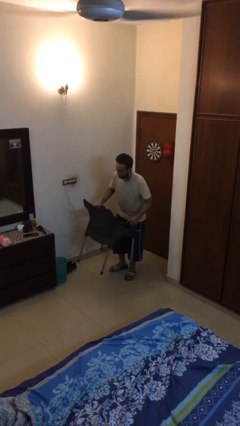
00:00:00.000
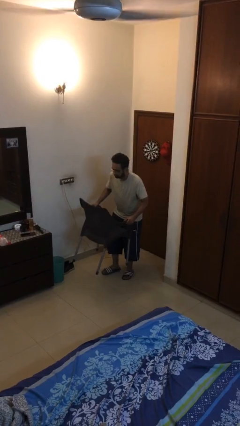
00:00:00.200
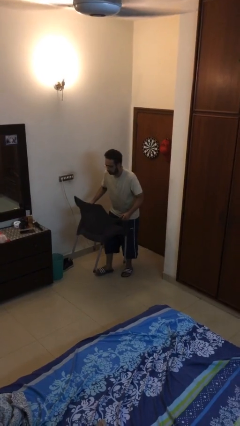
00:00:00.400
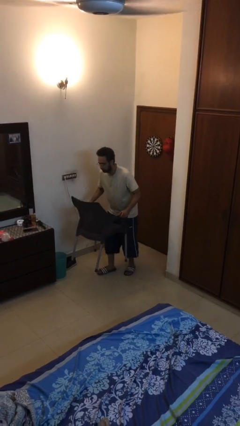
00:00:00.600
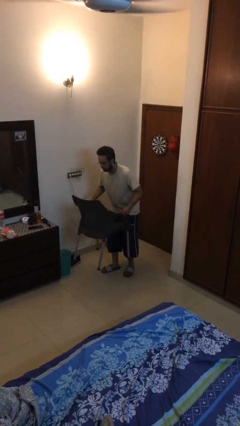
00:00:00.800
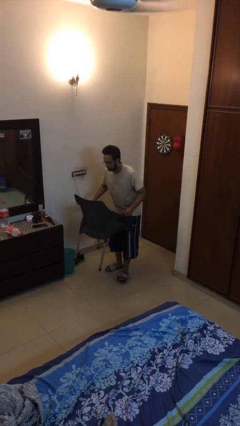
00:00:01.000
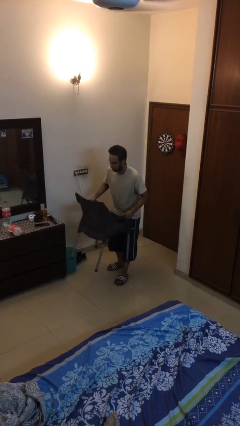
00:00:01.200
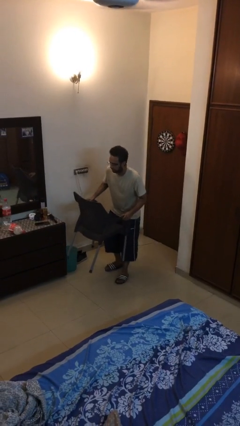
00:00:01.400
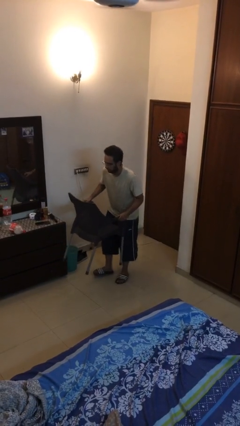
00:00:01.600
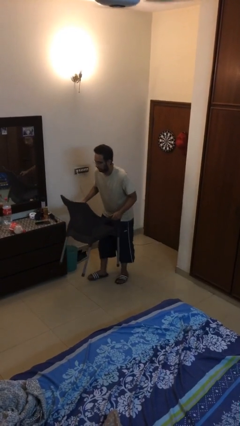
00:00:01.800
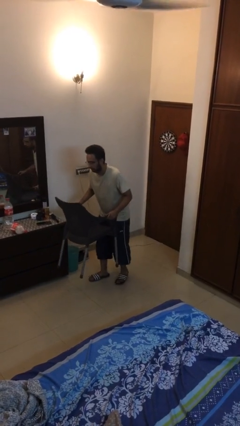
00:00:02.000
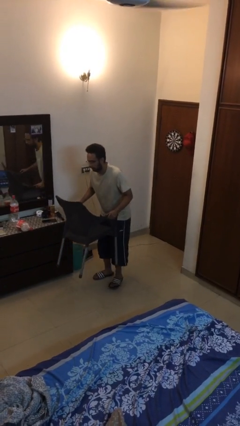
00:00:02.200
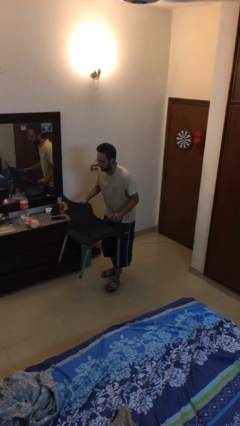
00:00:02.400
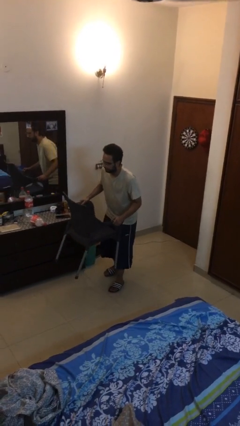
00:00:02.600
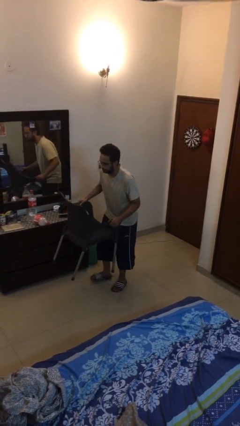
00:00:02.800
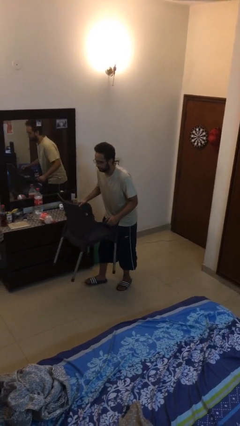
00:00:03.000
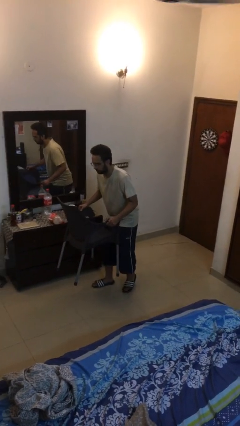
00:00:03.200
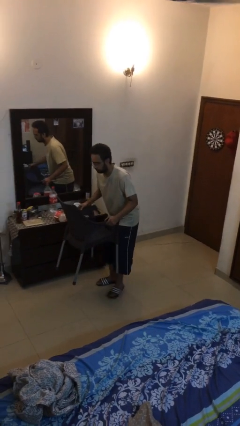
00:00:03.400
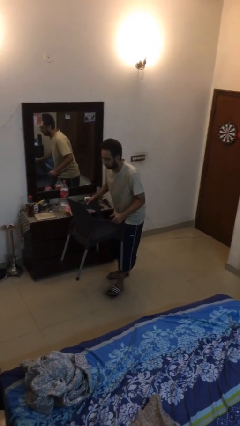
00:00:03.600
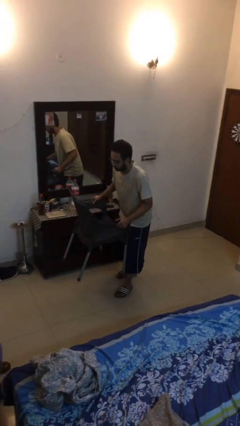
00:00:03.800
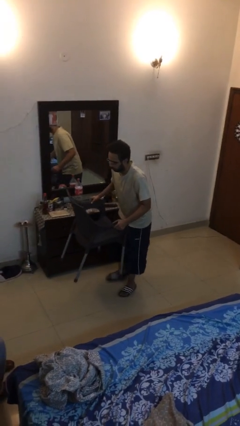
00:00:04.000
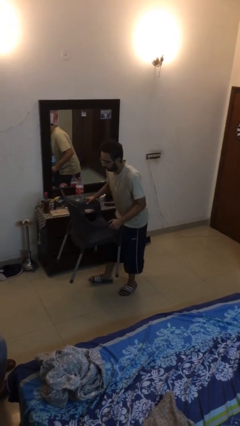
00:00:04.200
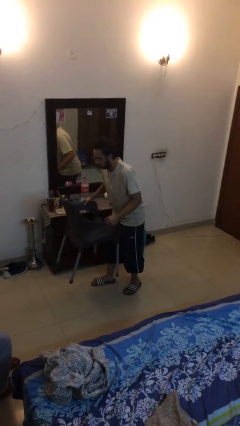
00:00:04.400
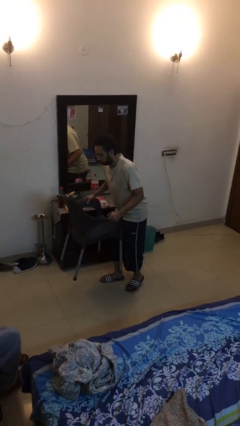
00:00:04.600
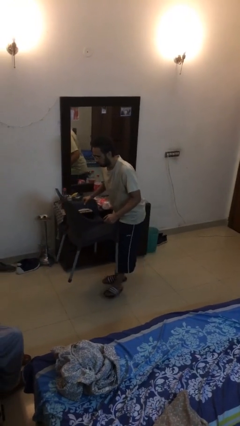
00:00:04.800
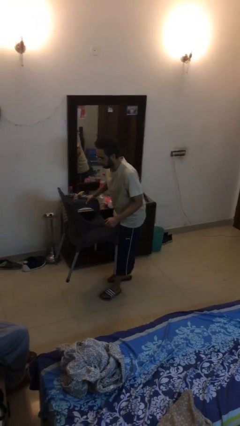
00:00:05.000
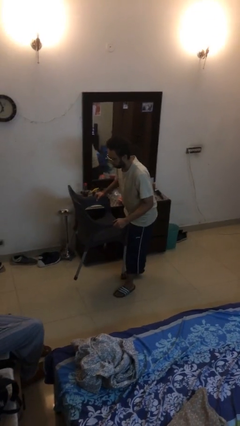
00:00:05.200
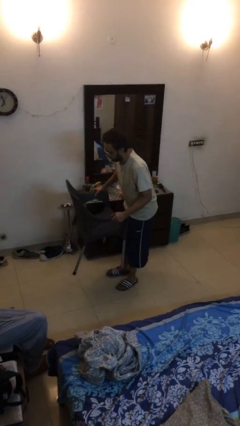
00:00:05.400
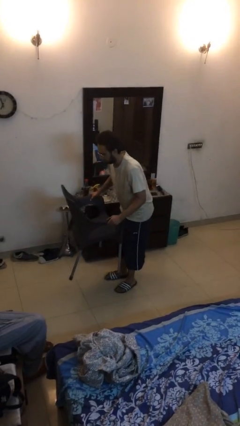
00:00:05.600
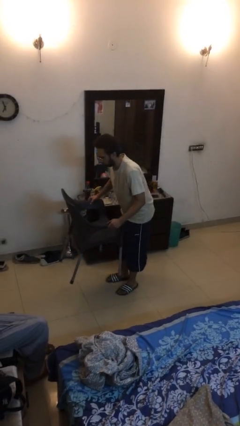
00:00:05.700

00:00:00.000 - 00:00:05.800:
person carries heavy object

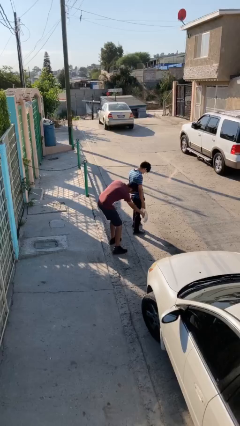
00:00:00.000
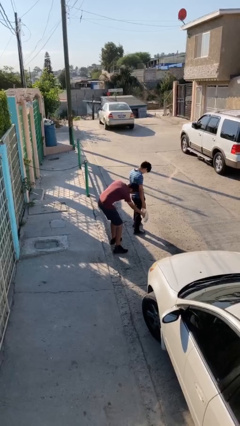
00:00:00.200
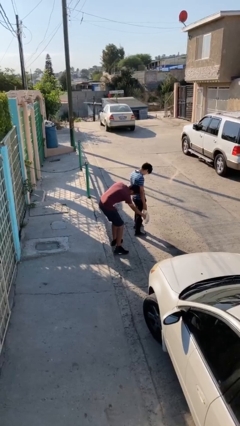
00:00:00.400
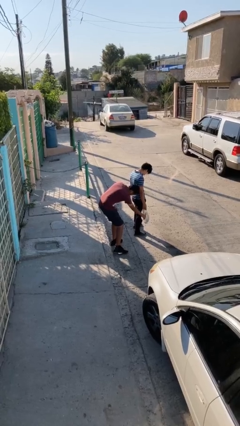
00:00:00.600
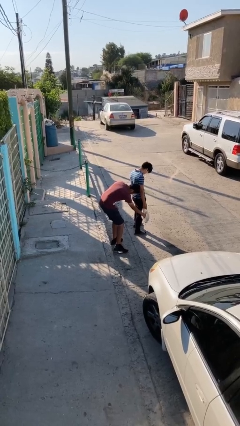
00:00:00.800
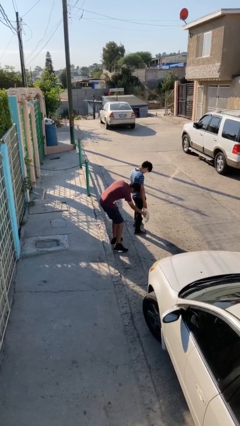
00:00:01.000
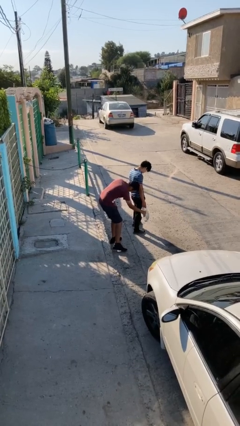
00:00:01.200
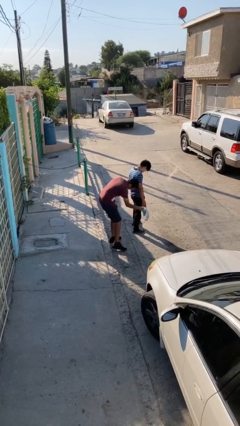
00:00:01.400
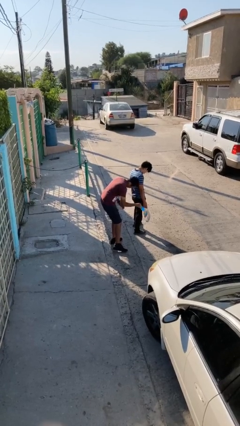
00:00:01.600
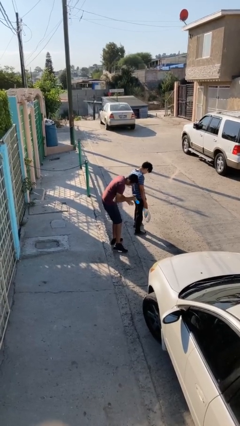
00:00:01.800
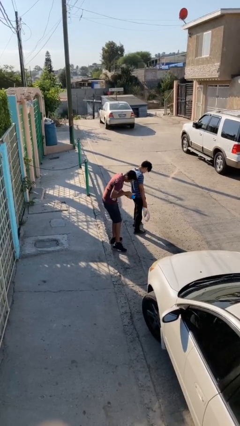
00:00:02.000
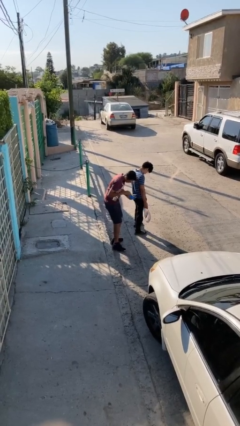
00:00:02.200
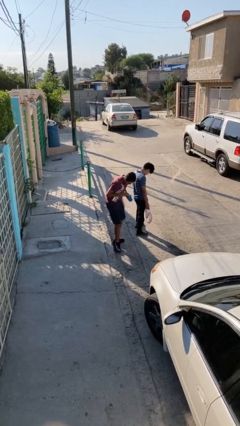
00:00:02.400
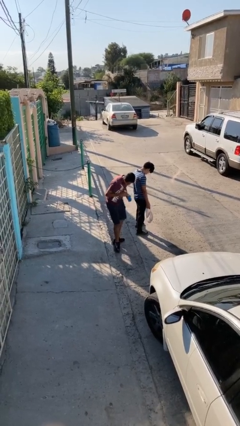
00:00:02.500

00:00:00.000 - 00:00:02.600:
person steals object from person

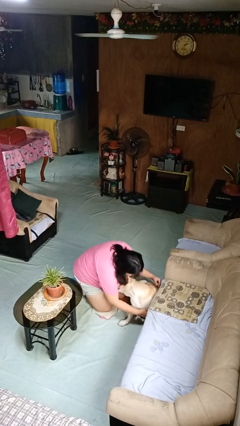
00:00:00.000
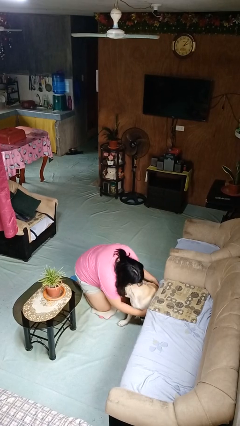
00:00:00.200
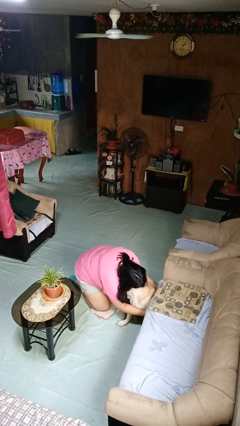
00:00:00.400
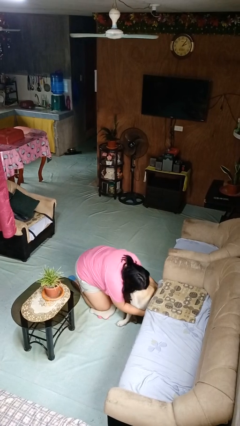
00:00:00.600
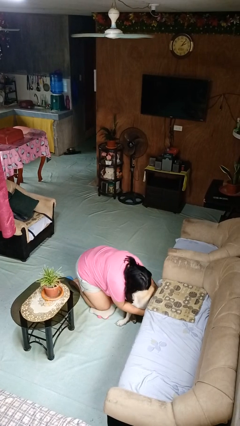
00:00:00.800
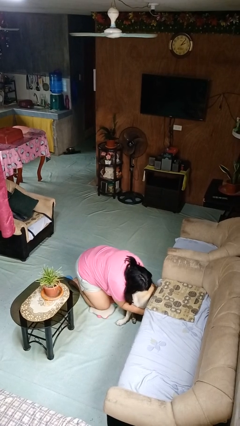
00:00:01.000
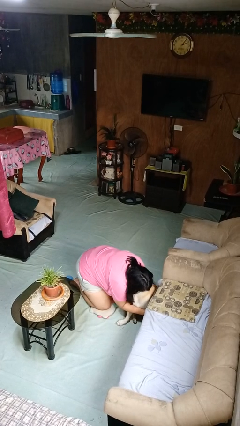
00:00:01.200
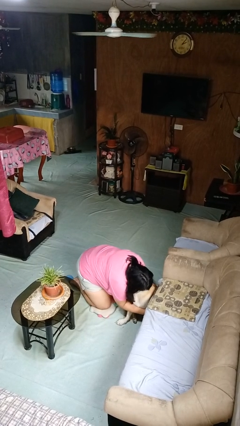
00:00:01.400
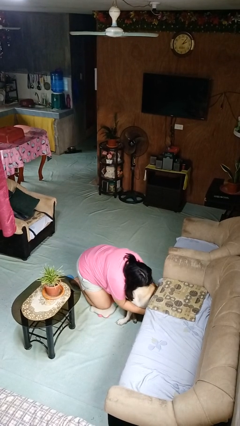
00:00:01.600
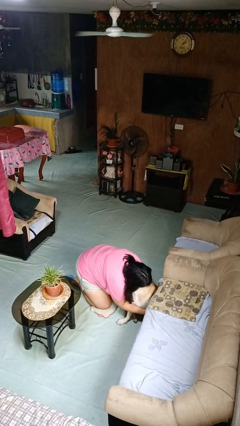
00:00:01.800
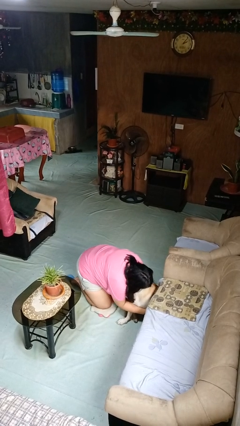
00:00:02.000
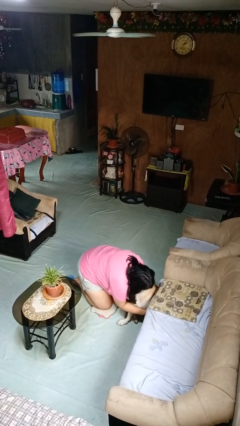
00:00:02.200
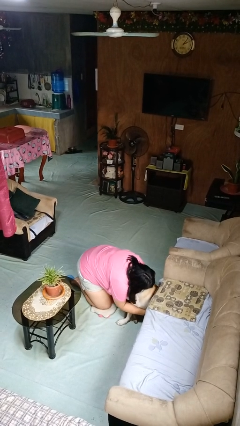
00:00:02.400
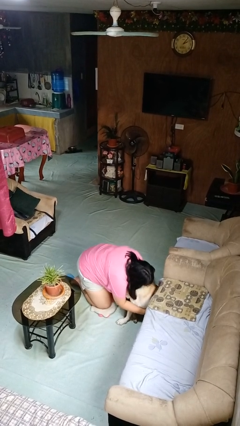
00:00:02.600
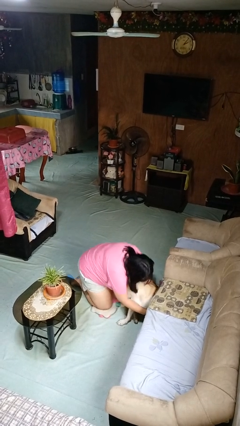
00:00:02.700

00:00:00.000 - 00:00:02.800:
person hugs dog

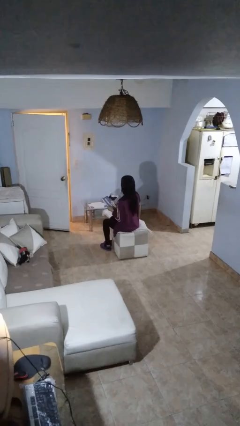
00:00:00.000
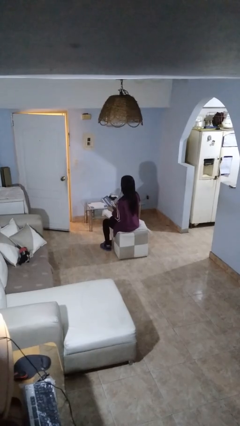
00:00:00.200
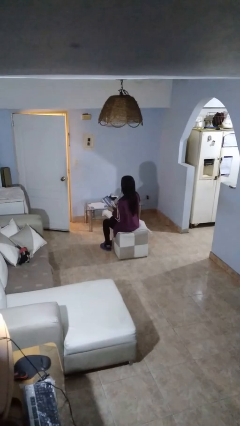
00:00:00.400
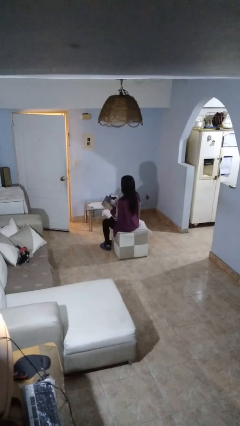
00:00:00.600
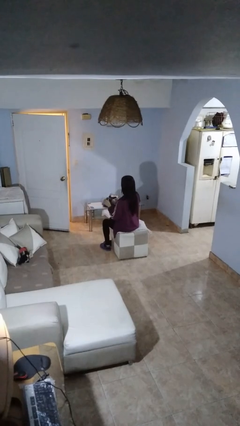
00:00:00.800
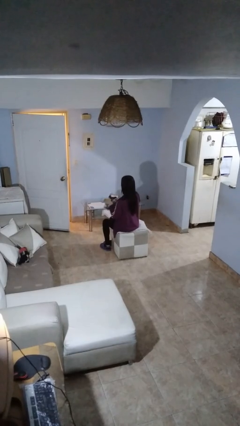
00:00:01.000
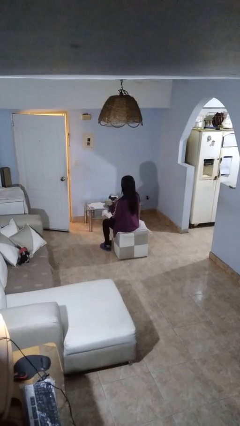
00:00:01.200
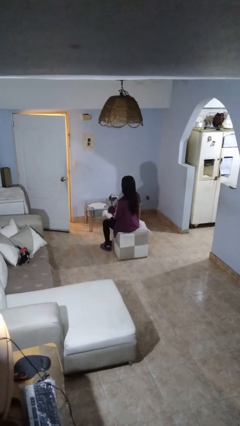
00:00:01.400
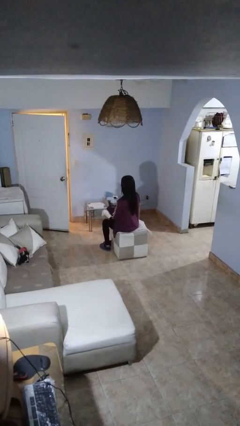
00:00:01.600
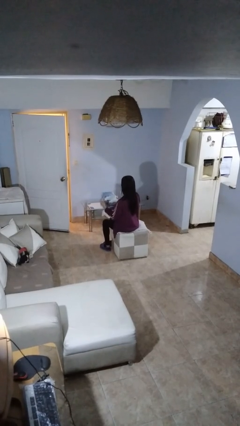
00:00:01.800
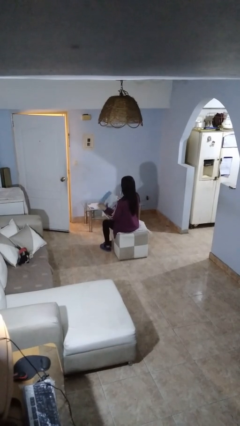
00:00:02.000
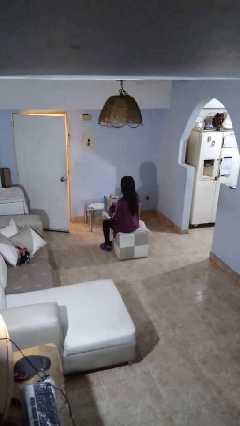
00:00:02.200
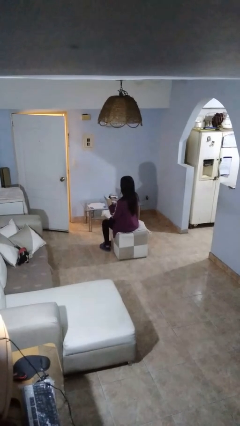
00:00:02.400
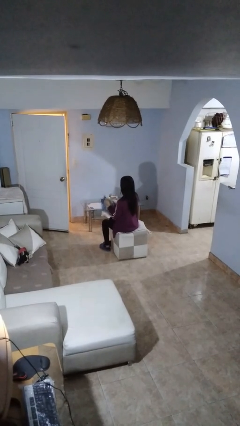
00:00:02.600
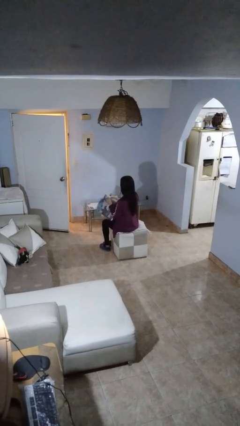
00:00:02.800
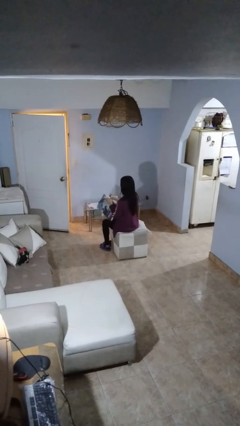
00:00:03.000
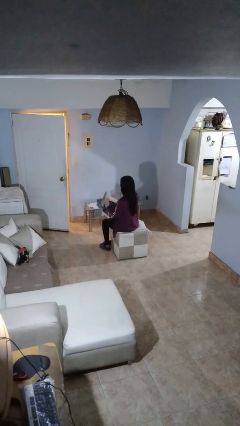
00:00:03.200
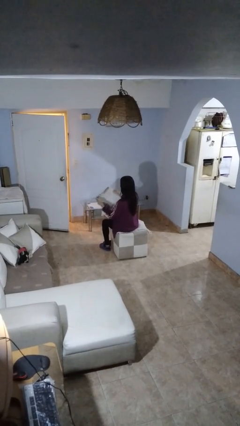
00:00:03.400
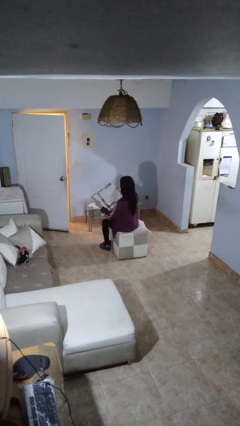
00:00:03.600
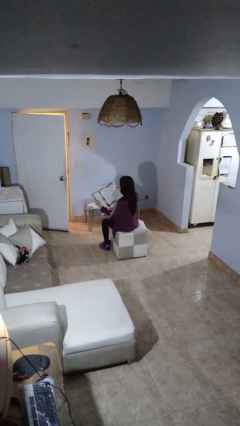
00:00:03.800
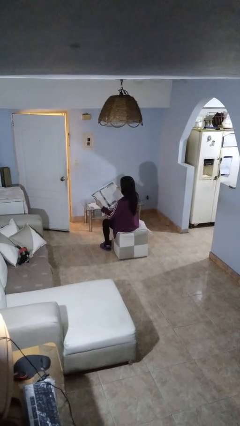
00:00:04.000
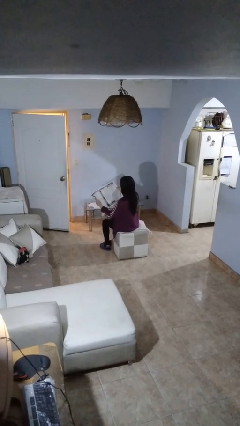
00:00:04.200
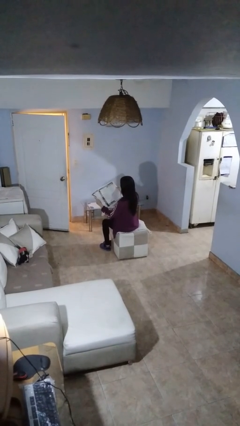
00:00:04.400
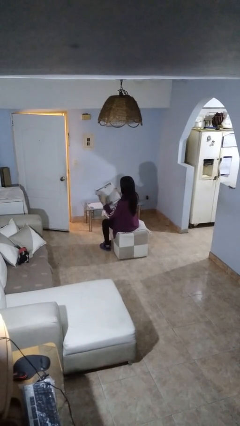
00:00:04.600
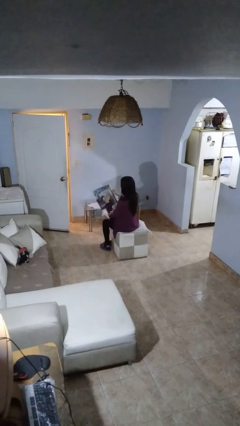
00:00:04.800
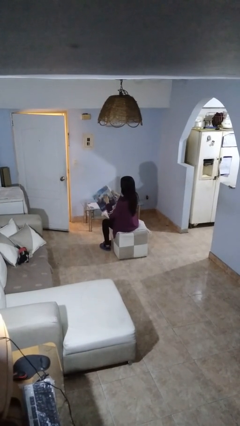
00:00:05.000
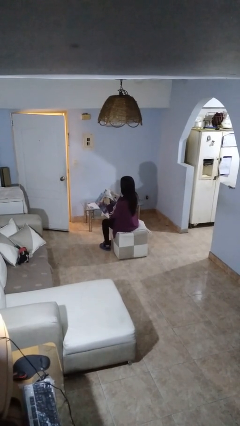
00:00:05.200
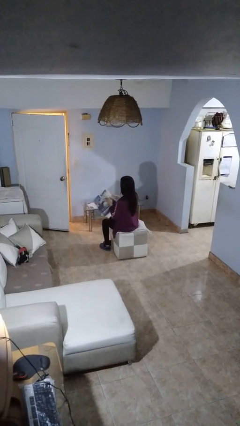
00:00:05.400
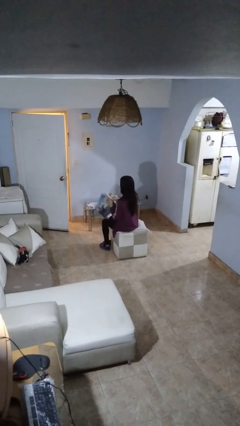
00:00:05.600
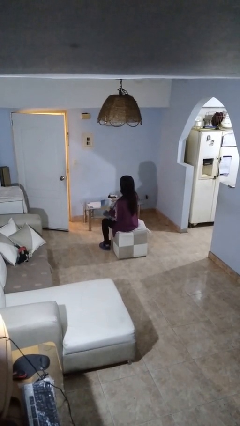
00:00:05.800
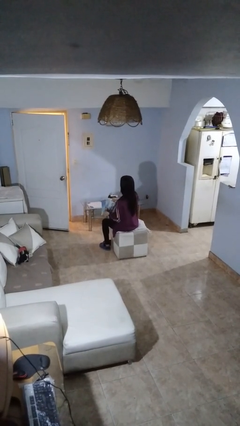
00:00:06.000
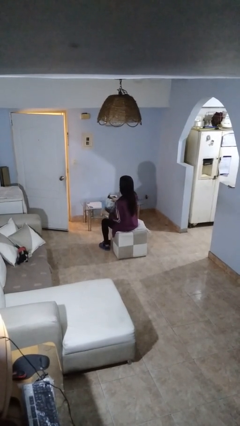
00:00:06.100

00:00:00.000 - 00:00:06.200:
person reads newspaper

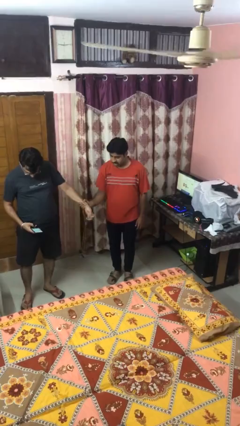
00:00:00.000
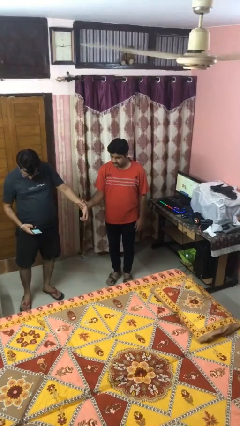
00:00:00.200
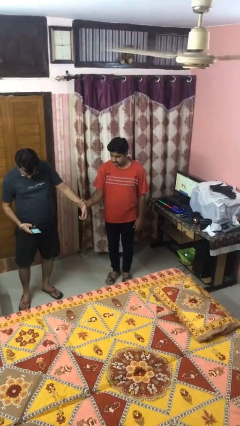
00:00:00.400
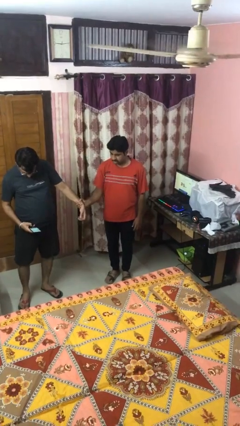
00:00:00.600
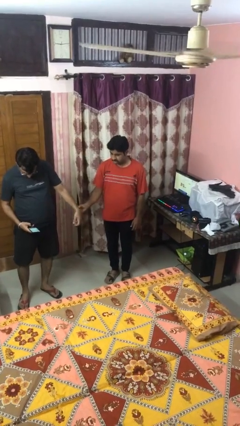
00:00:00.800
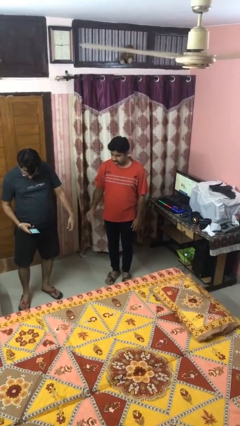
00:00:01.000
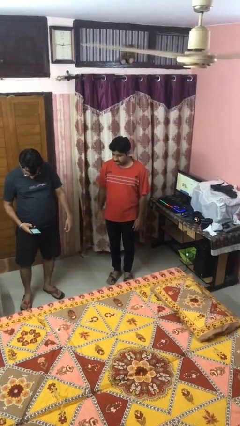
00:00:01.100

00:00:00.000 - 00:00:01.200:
person grabs person by forearm
